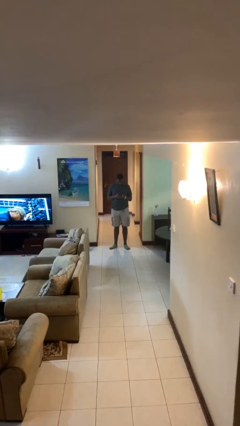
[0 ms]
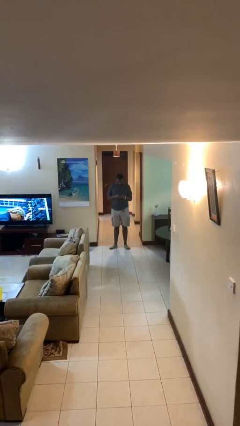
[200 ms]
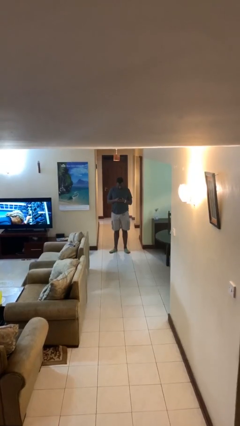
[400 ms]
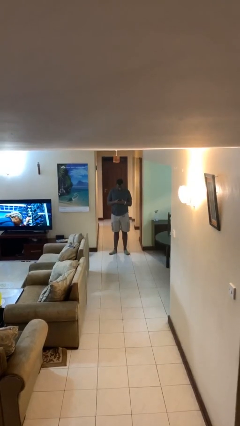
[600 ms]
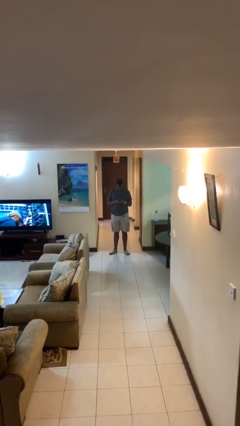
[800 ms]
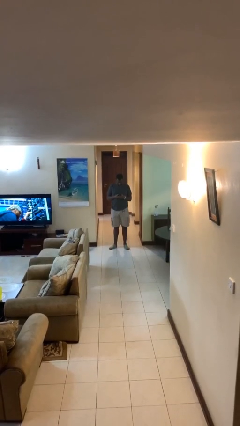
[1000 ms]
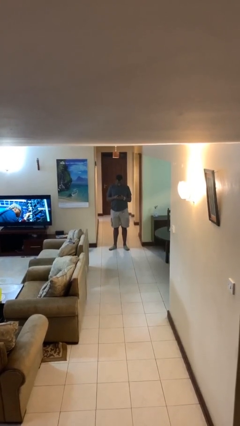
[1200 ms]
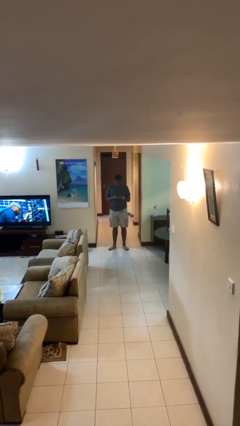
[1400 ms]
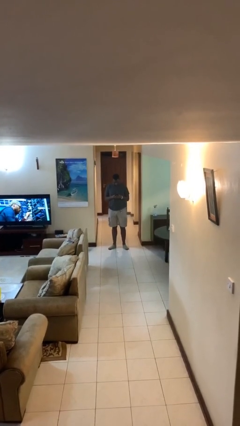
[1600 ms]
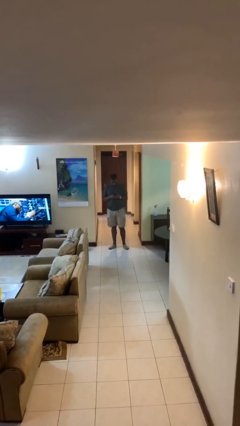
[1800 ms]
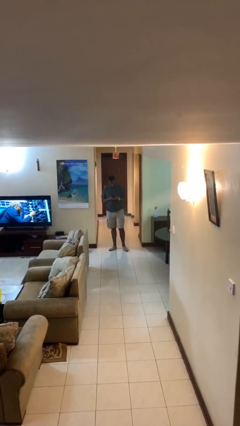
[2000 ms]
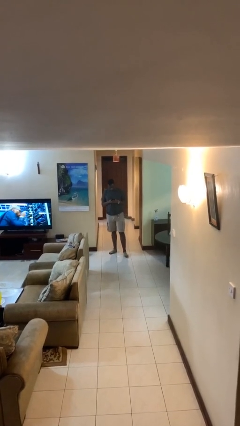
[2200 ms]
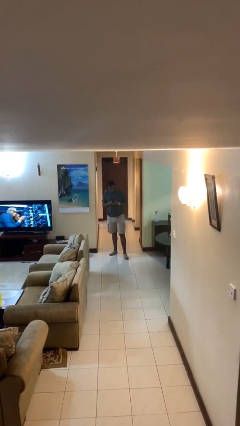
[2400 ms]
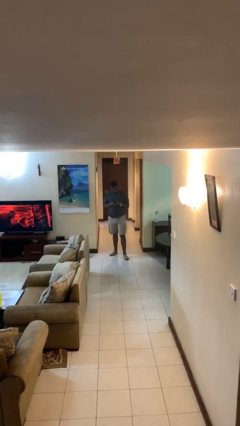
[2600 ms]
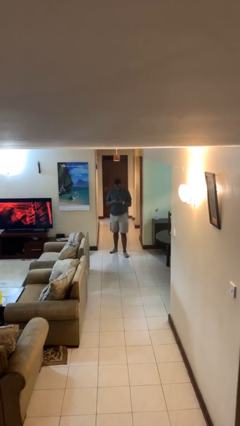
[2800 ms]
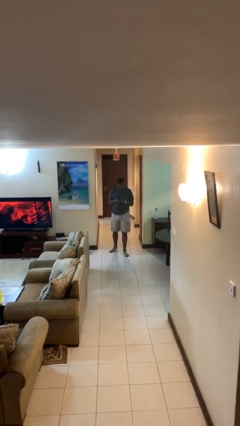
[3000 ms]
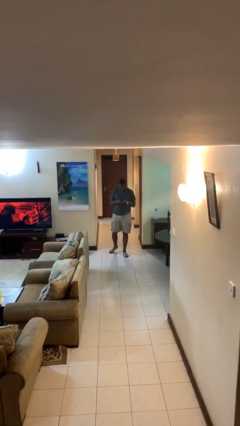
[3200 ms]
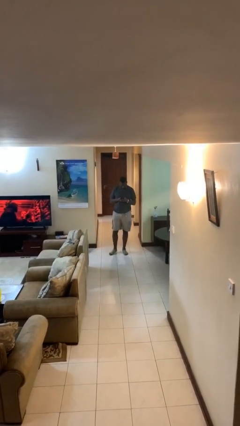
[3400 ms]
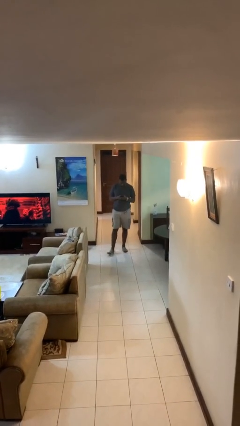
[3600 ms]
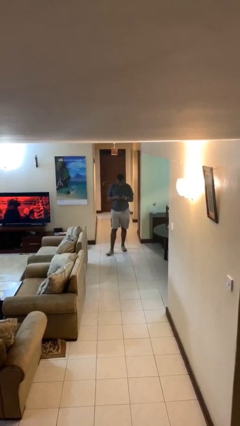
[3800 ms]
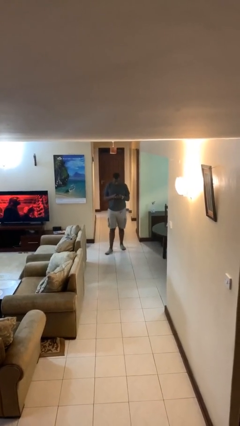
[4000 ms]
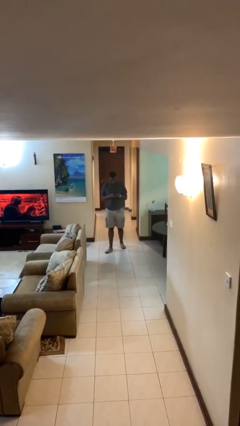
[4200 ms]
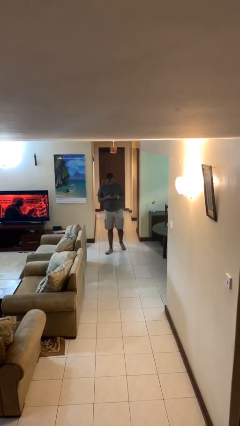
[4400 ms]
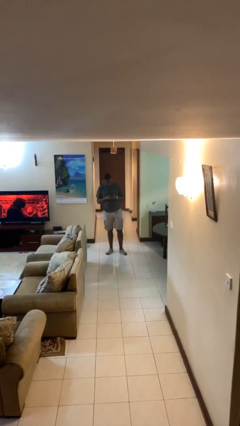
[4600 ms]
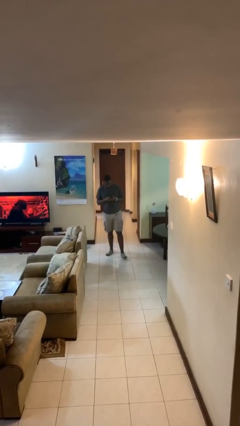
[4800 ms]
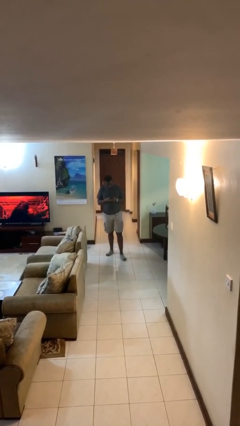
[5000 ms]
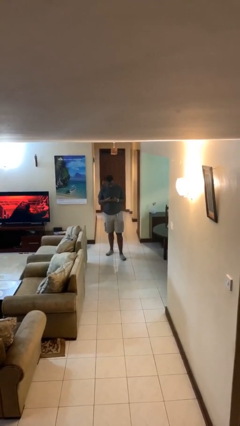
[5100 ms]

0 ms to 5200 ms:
person texts on phone

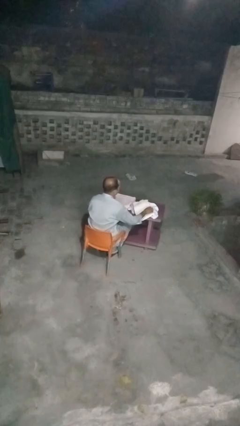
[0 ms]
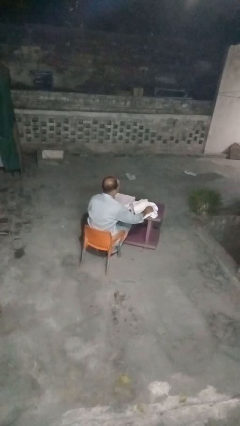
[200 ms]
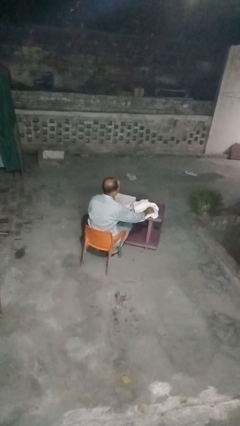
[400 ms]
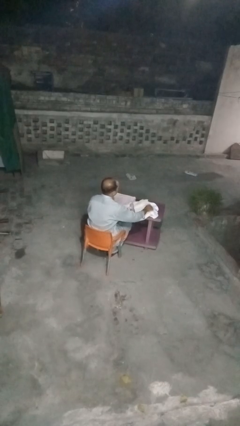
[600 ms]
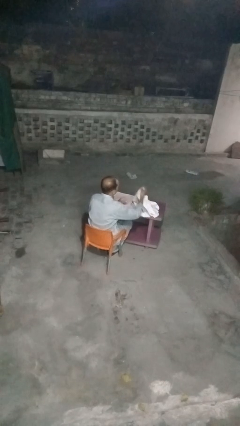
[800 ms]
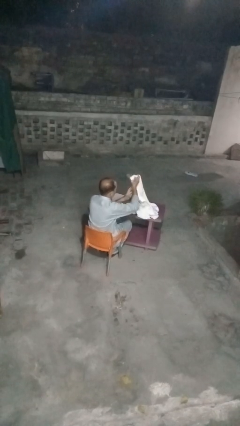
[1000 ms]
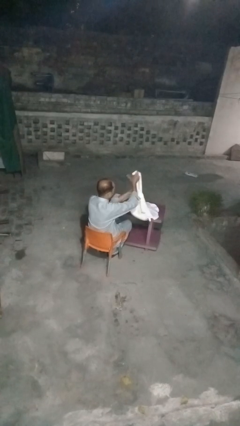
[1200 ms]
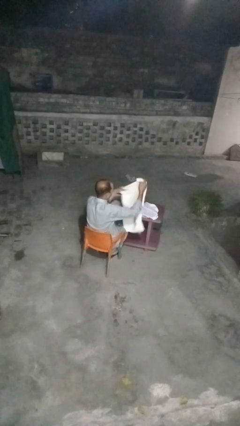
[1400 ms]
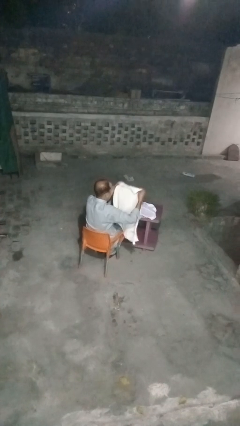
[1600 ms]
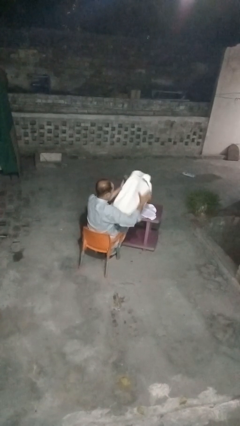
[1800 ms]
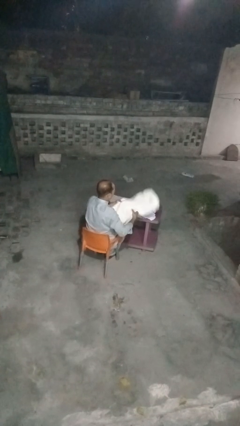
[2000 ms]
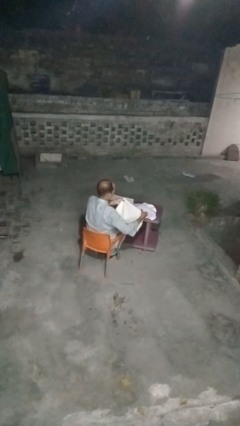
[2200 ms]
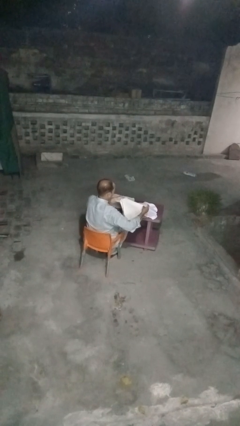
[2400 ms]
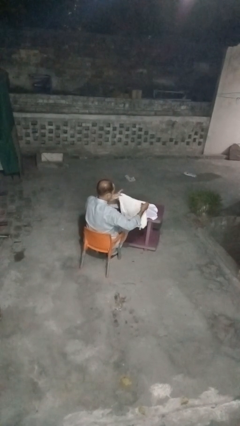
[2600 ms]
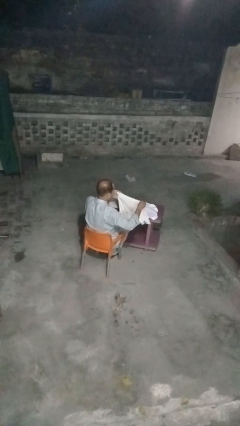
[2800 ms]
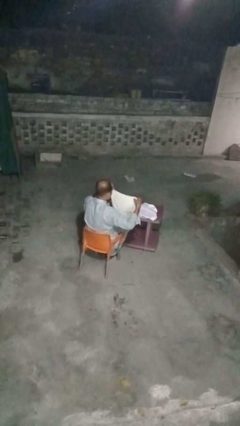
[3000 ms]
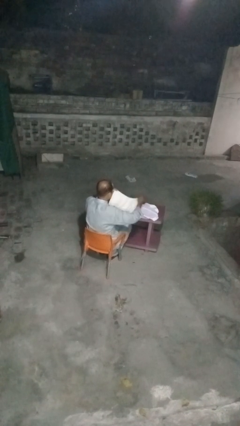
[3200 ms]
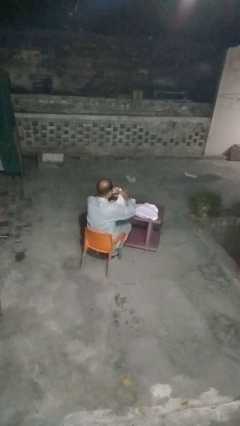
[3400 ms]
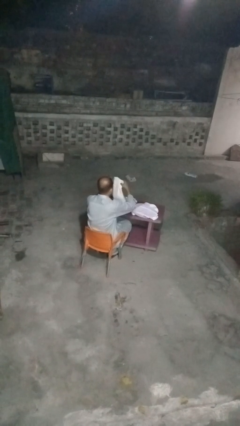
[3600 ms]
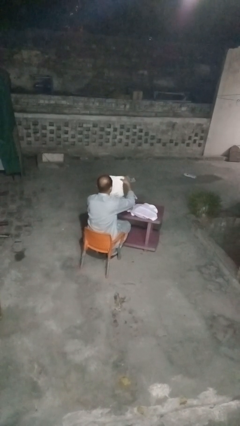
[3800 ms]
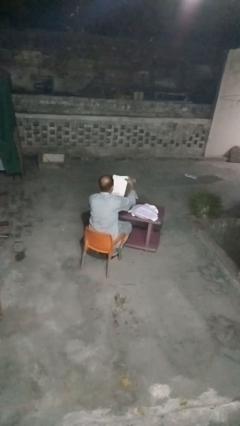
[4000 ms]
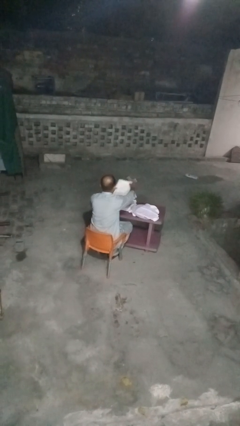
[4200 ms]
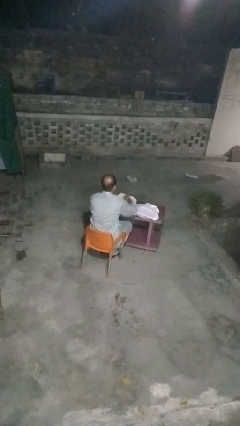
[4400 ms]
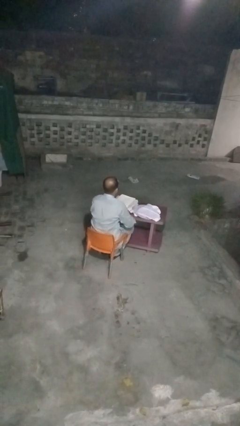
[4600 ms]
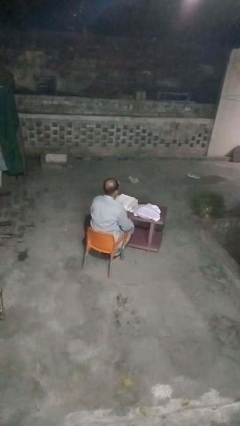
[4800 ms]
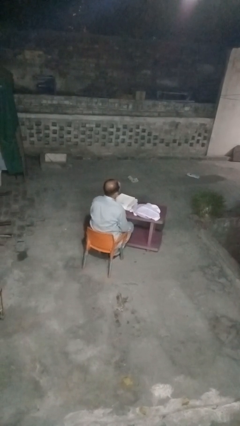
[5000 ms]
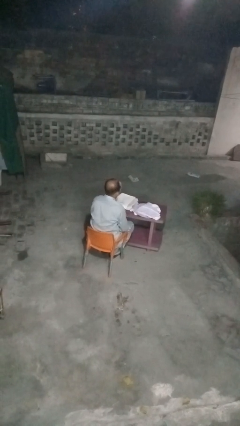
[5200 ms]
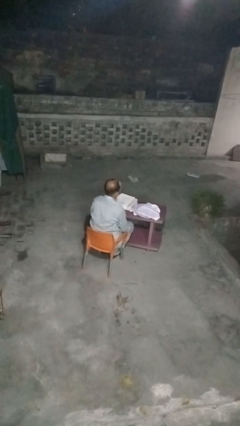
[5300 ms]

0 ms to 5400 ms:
person folds towel

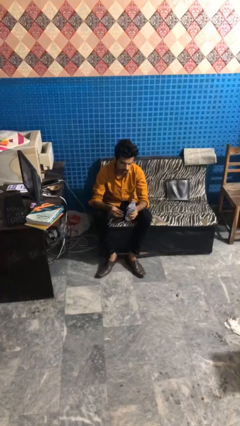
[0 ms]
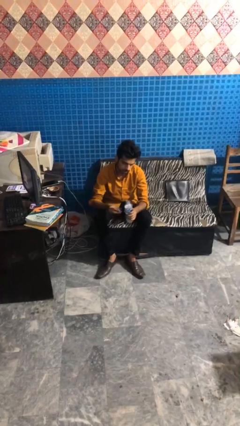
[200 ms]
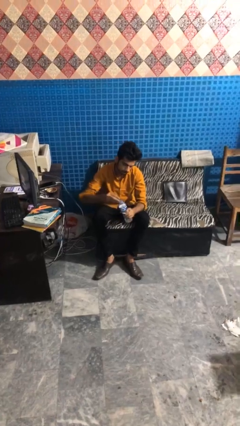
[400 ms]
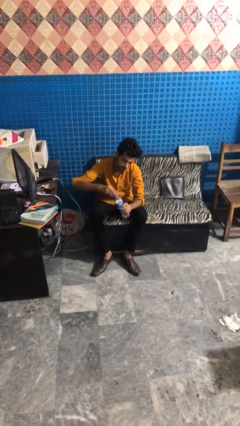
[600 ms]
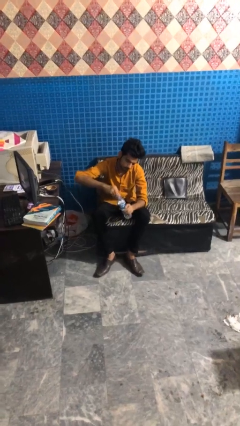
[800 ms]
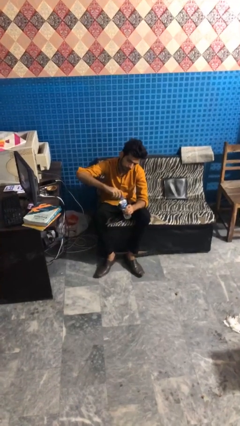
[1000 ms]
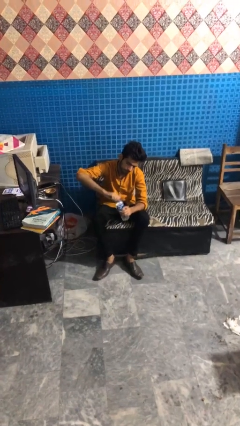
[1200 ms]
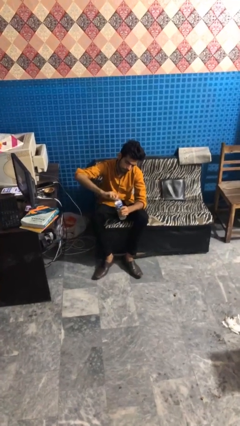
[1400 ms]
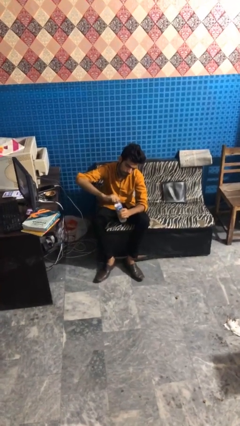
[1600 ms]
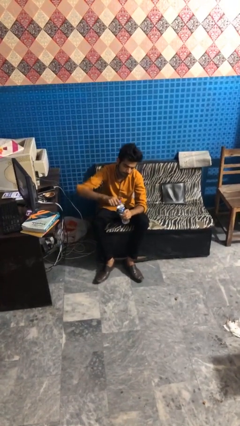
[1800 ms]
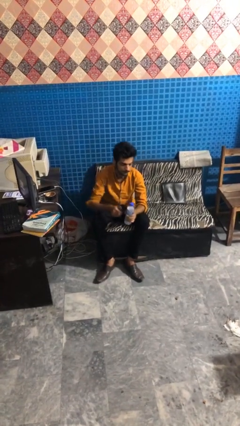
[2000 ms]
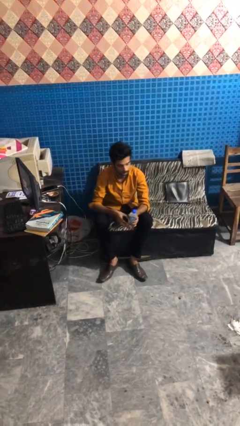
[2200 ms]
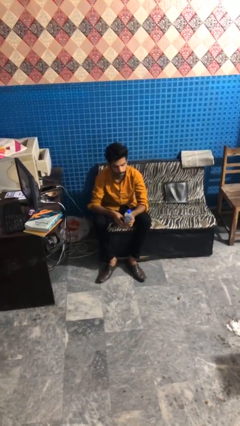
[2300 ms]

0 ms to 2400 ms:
person screws lid to bottle

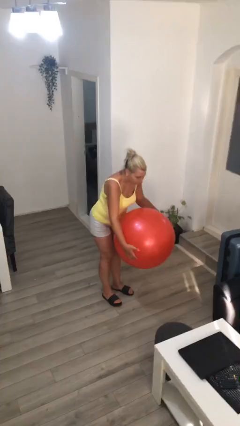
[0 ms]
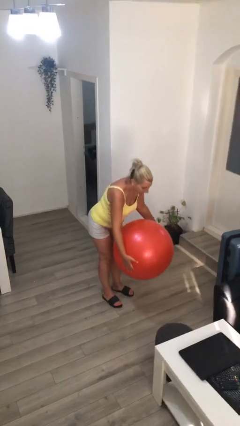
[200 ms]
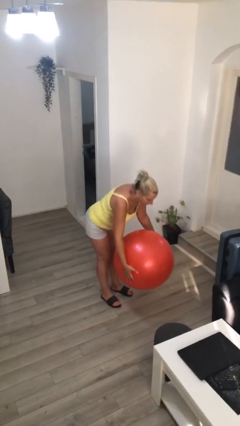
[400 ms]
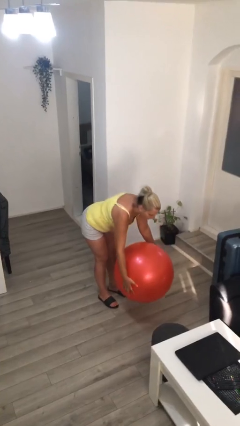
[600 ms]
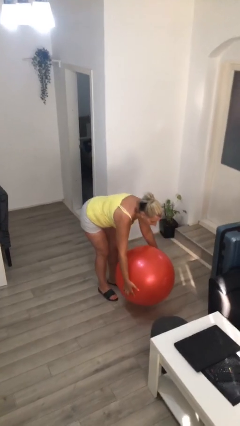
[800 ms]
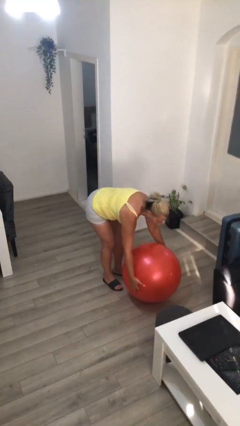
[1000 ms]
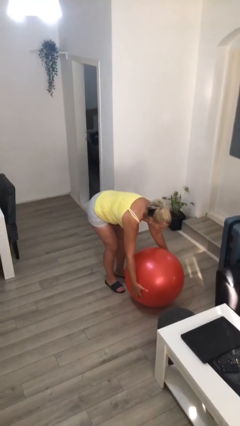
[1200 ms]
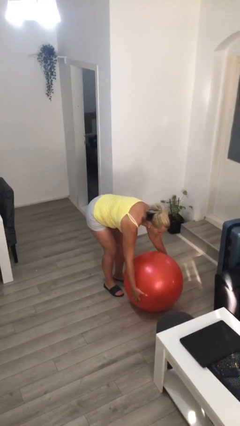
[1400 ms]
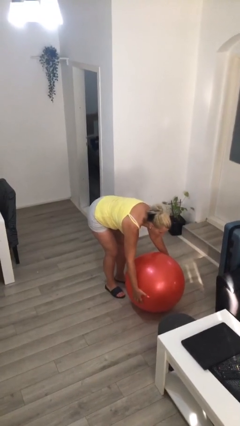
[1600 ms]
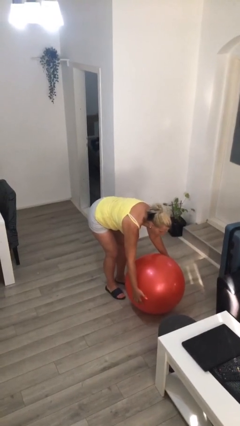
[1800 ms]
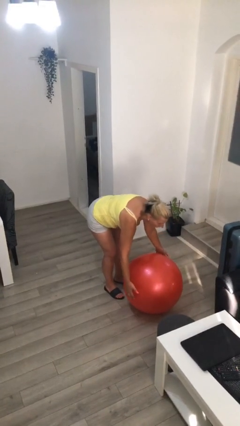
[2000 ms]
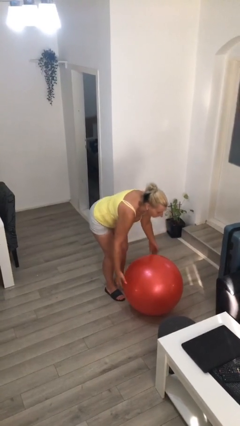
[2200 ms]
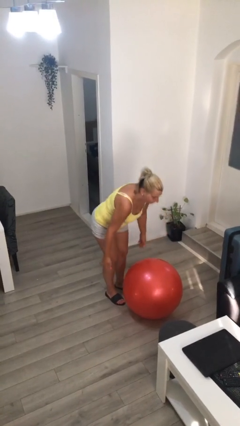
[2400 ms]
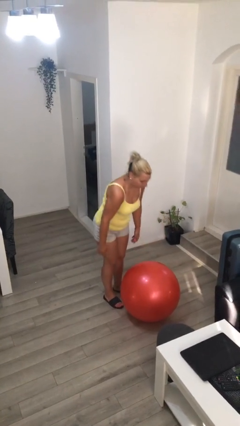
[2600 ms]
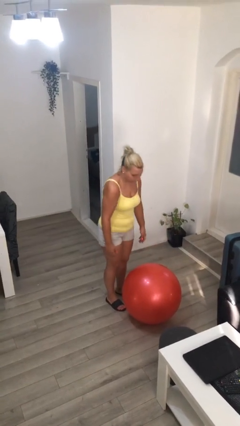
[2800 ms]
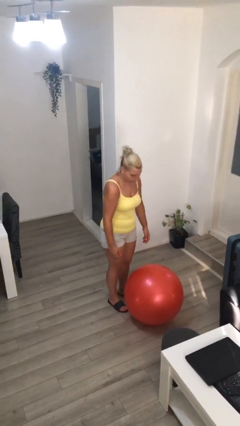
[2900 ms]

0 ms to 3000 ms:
person puts down object on floor

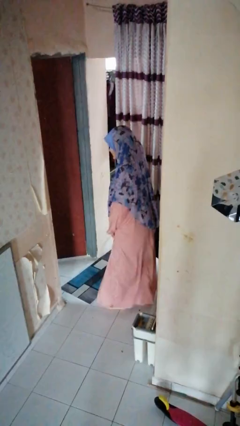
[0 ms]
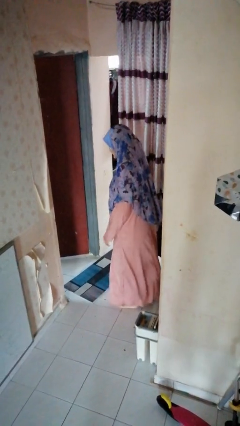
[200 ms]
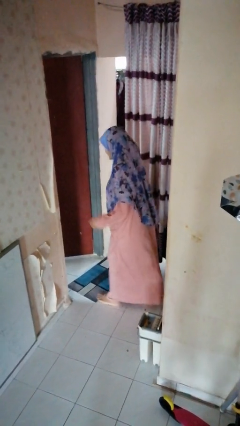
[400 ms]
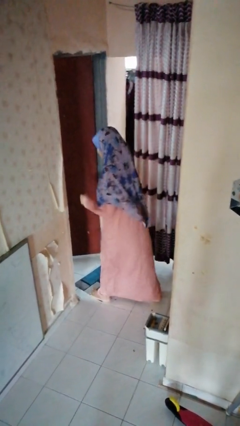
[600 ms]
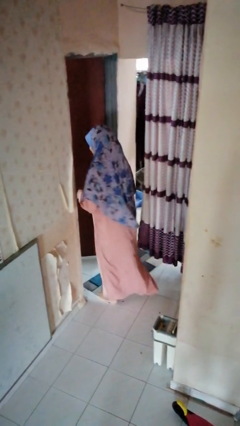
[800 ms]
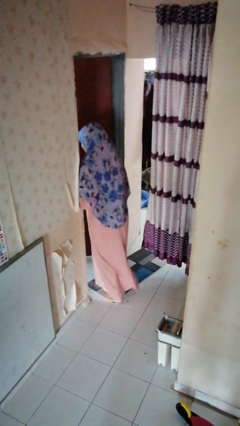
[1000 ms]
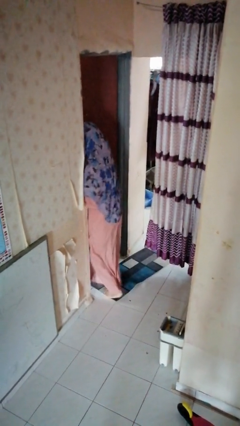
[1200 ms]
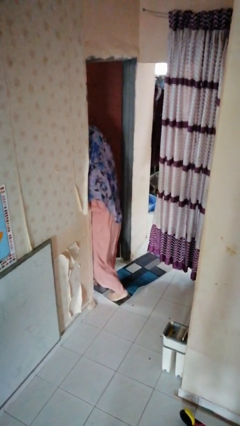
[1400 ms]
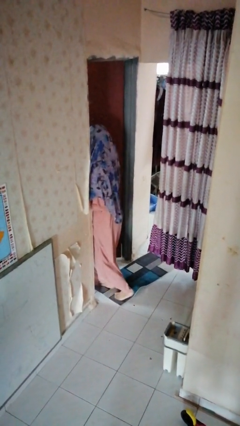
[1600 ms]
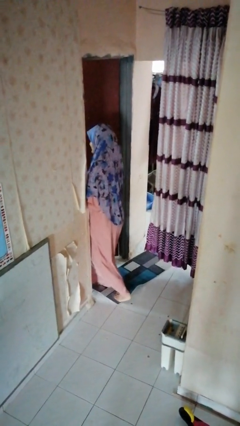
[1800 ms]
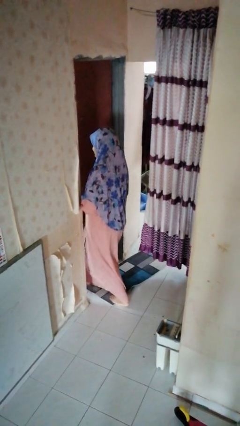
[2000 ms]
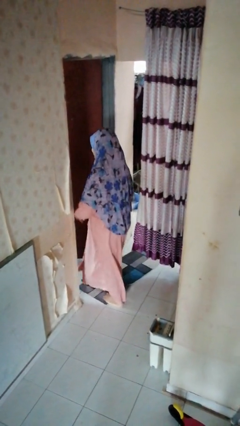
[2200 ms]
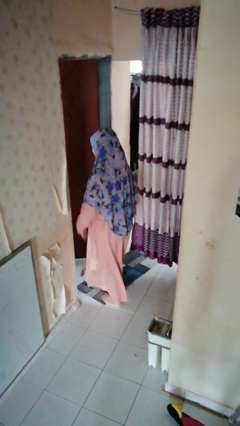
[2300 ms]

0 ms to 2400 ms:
person bumps into wall
